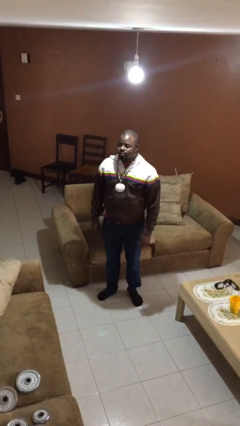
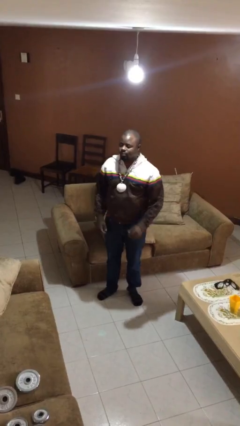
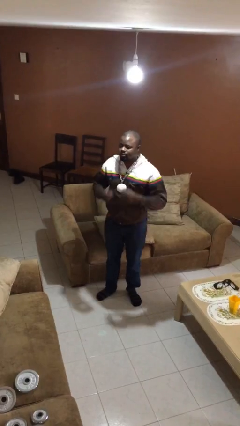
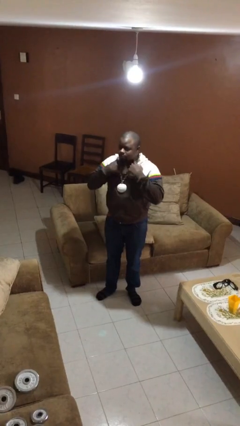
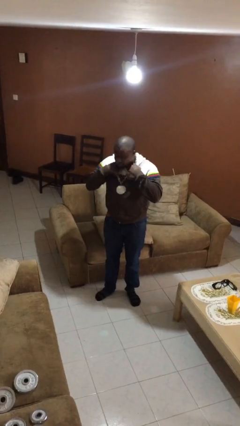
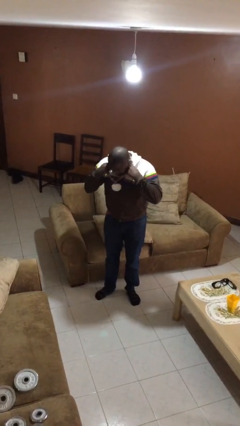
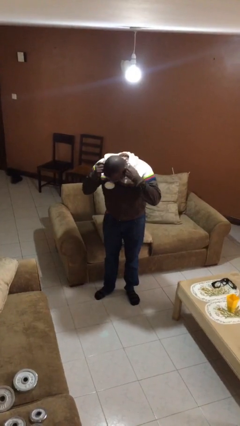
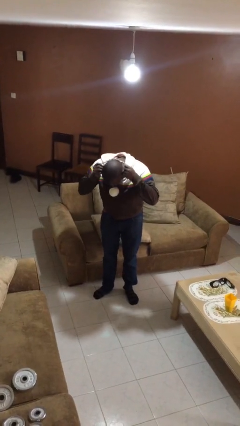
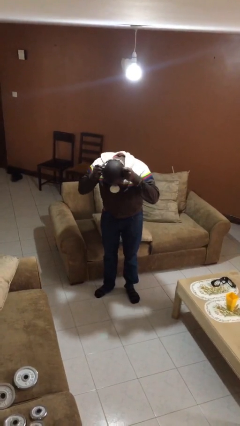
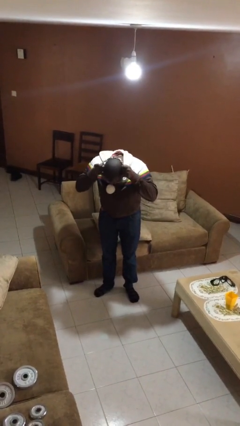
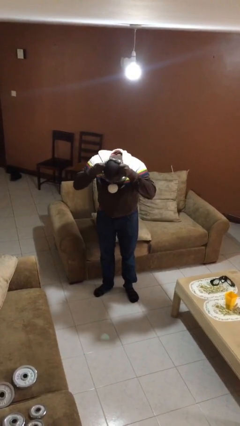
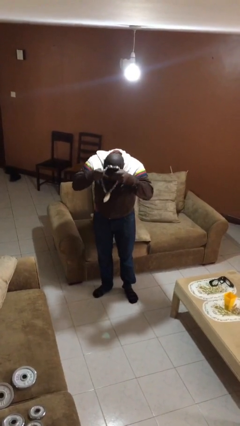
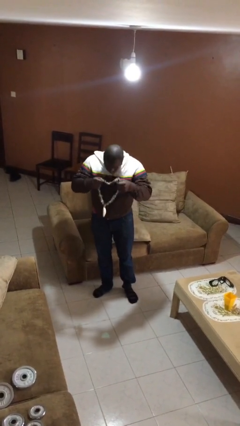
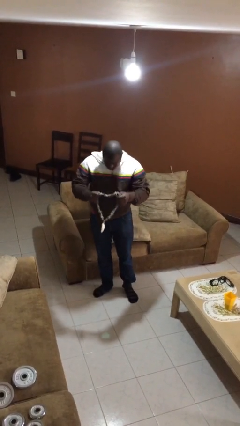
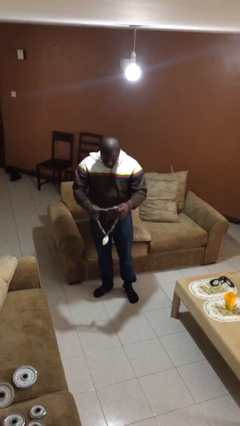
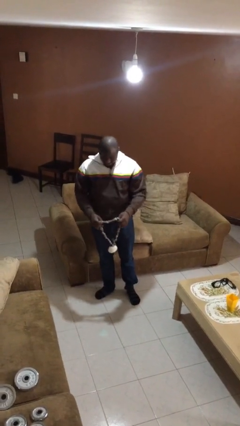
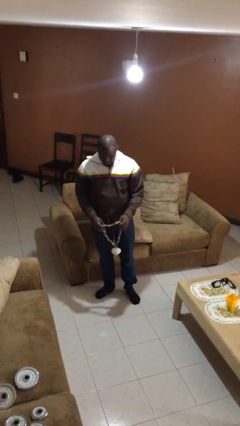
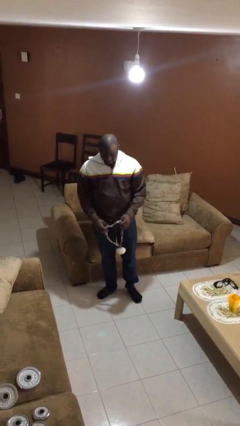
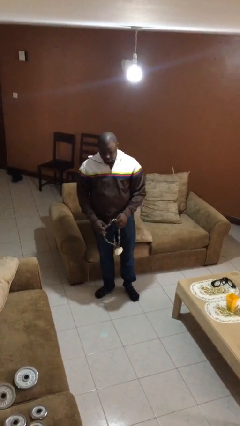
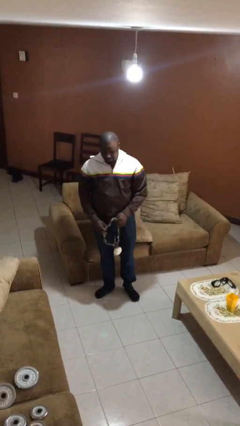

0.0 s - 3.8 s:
person takes off necklace

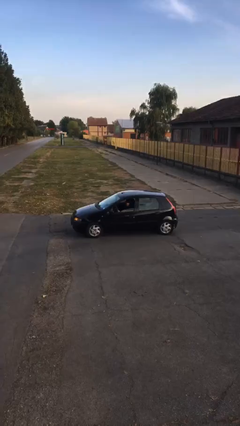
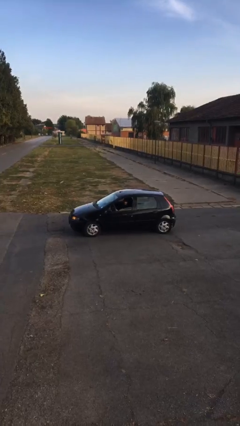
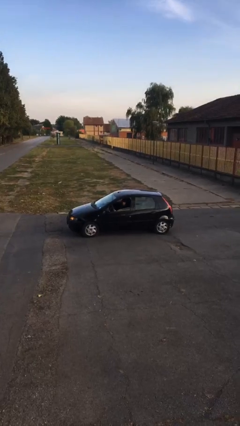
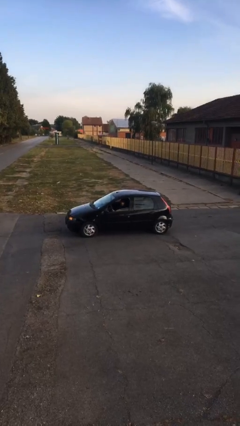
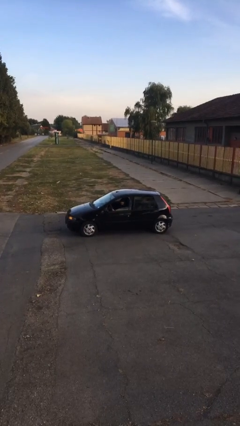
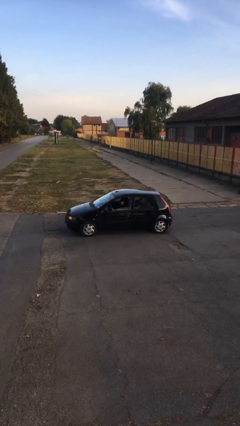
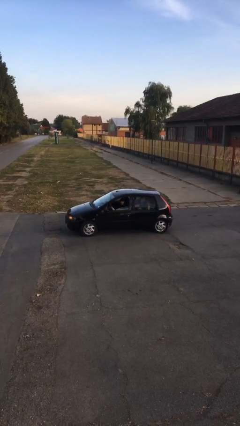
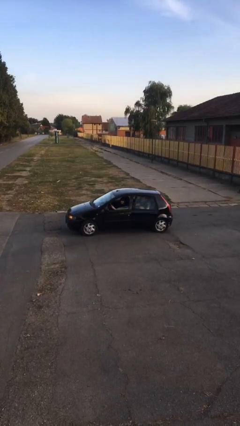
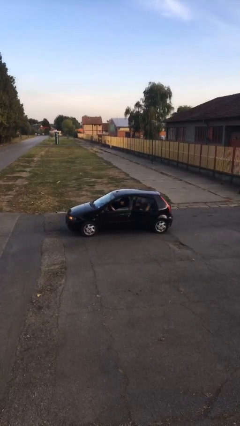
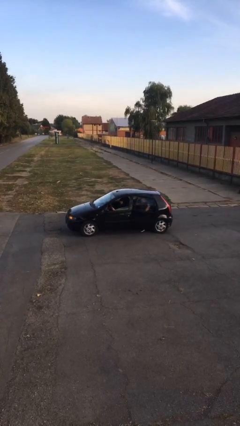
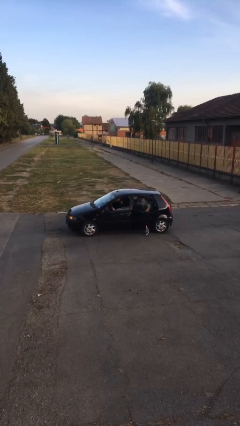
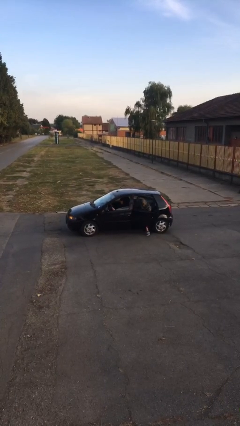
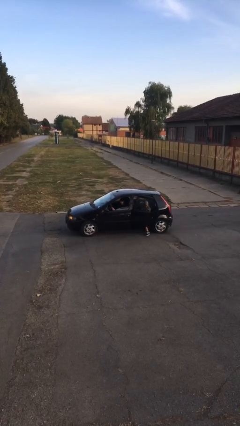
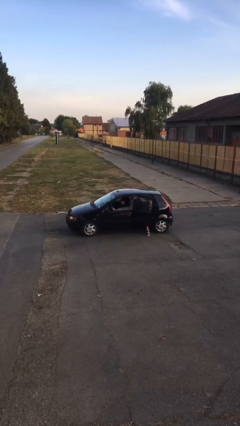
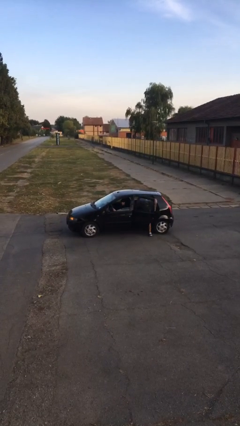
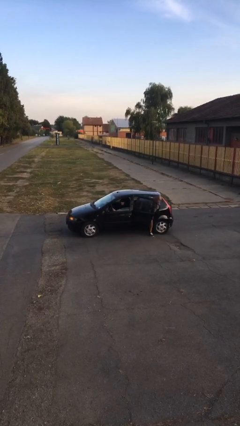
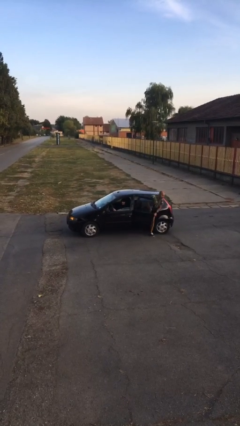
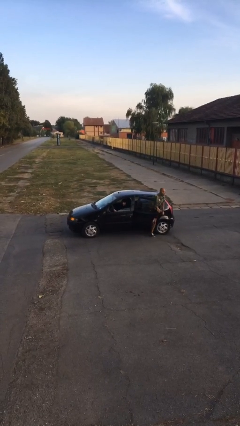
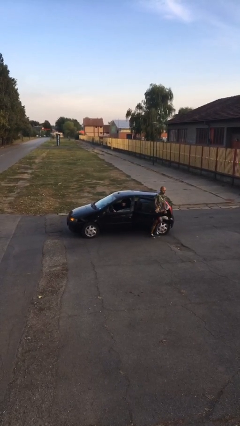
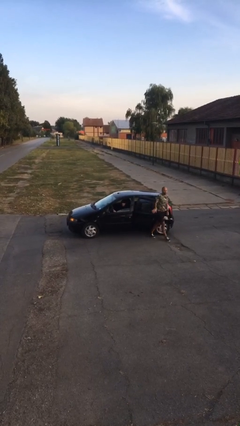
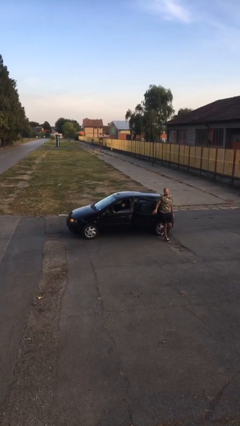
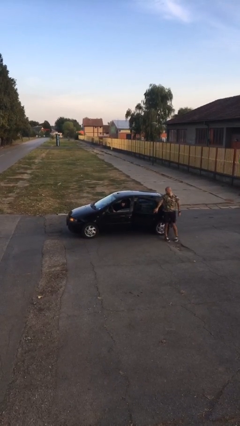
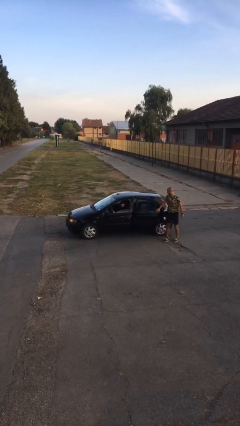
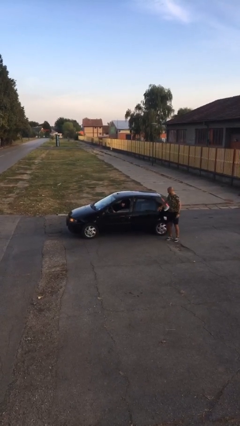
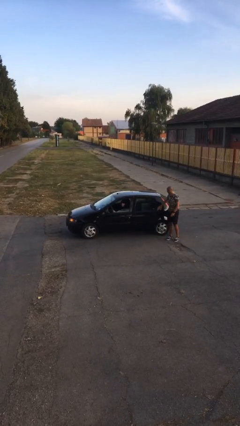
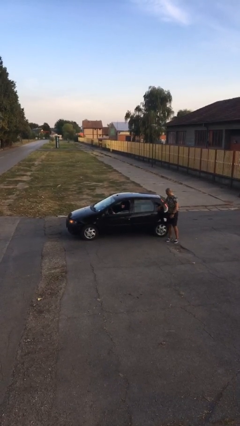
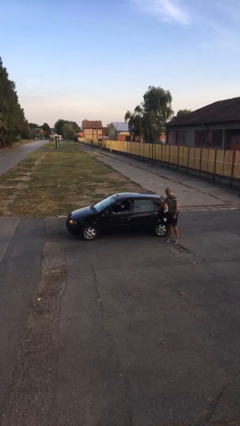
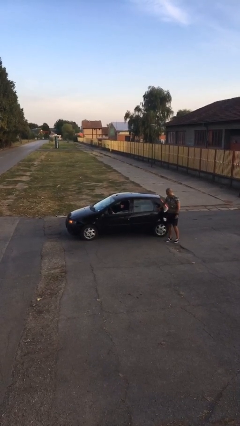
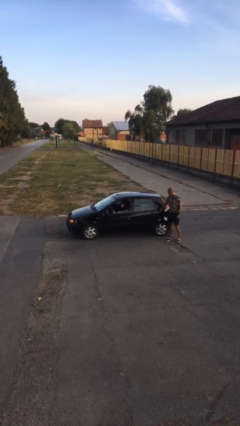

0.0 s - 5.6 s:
car drops off person

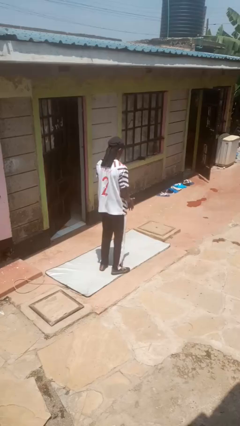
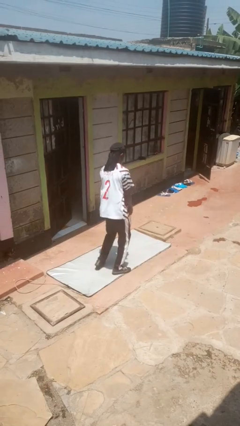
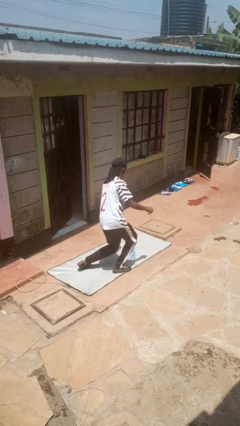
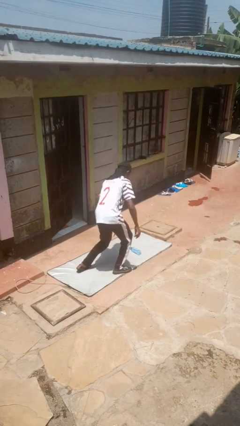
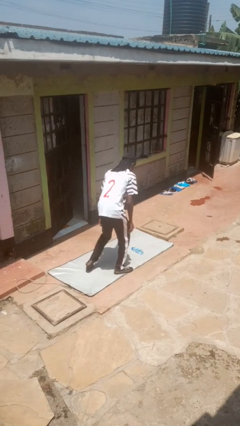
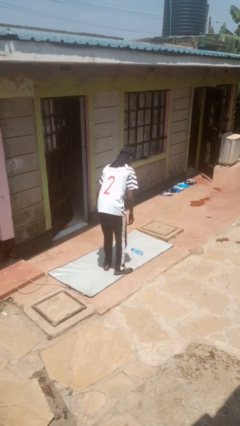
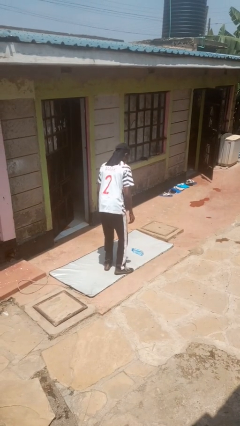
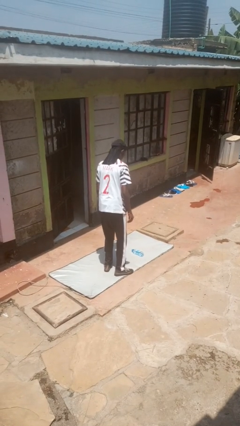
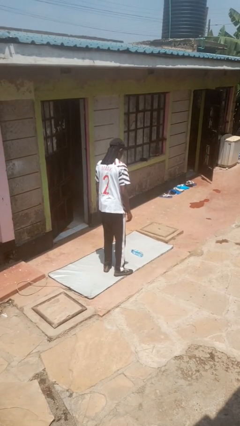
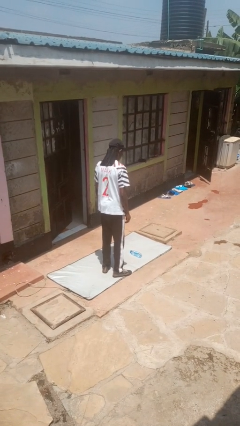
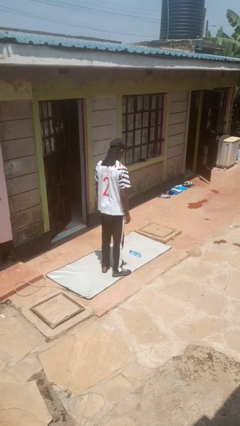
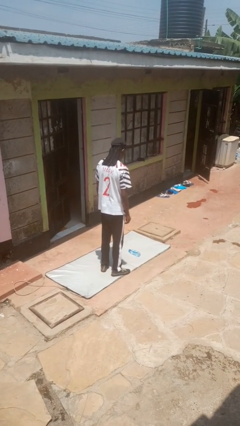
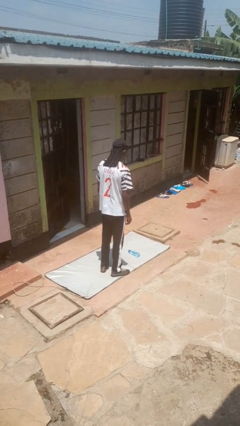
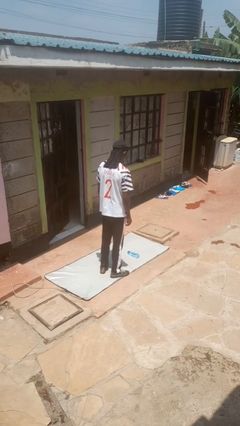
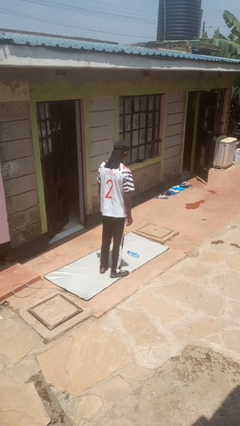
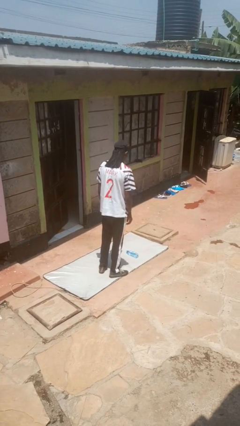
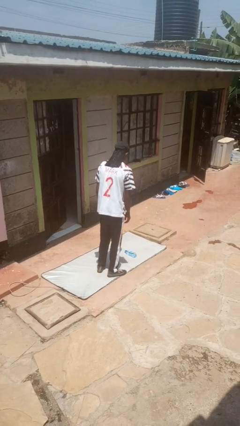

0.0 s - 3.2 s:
person drops object

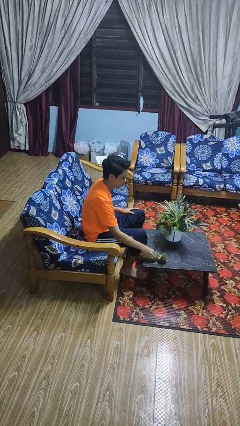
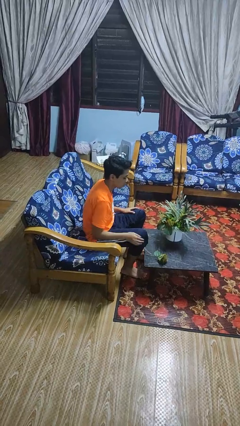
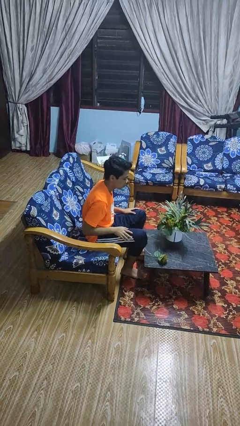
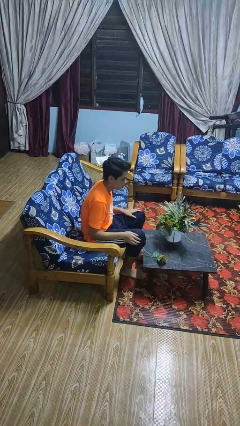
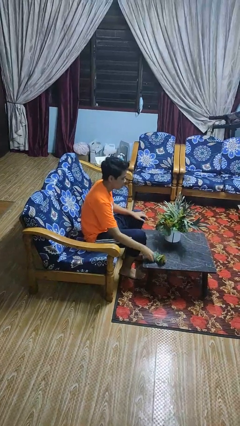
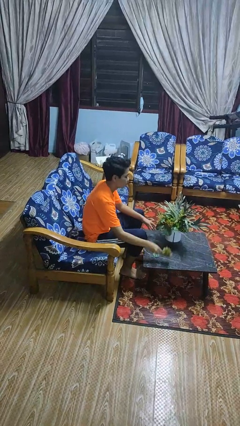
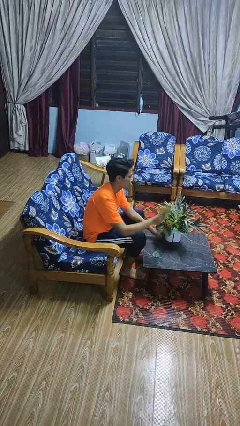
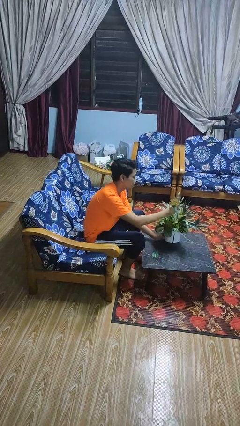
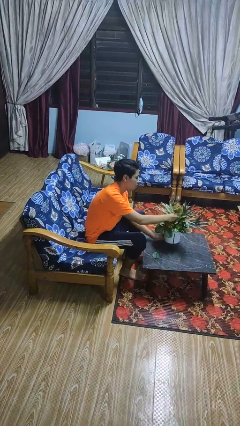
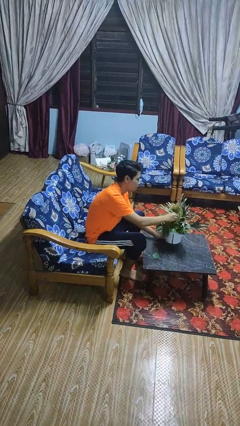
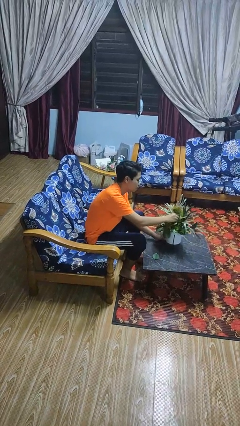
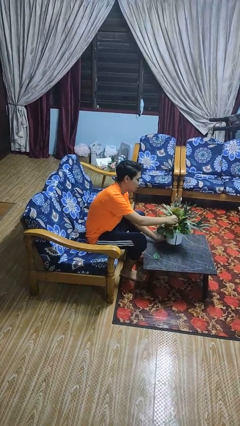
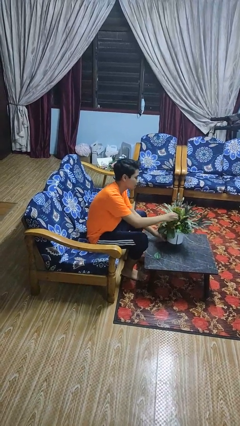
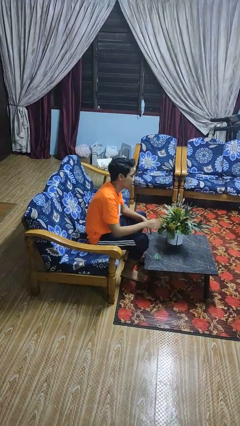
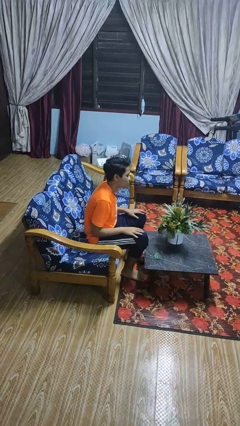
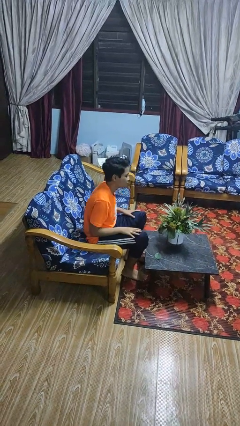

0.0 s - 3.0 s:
person arranges flowers in vase

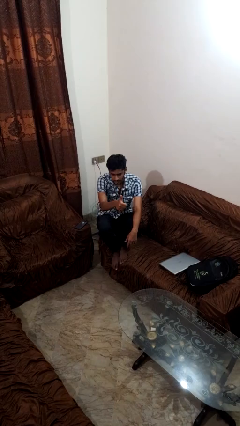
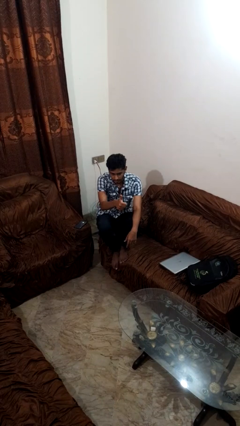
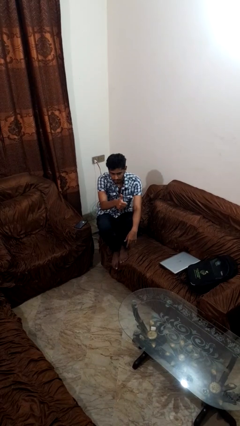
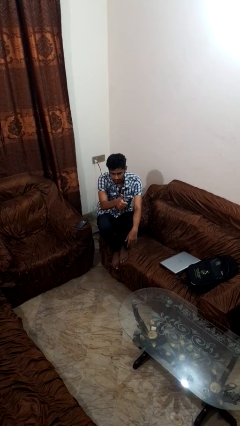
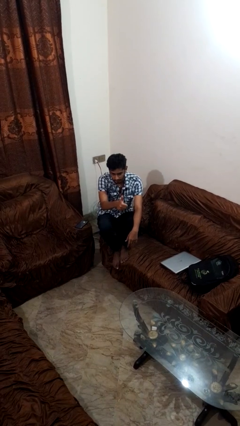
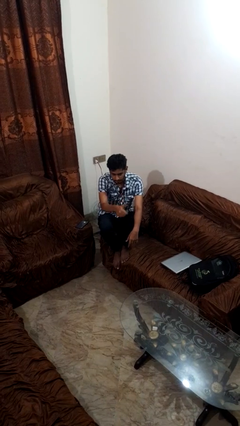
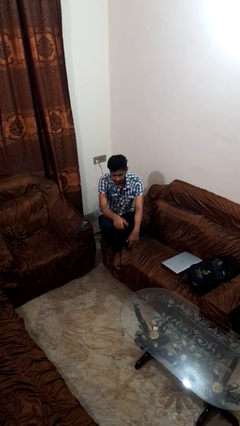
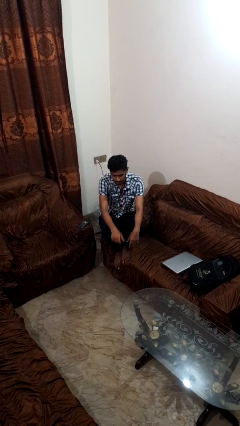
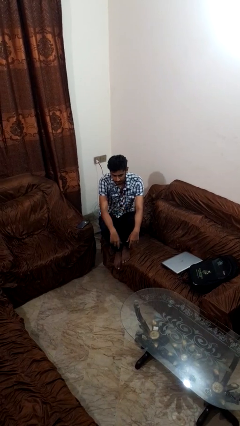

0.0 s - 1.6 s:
person gestures thumbs up

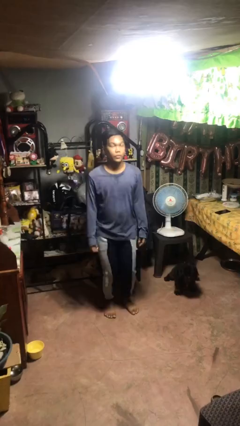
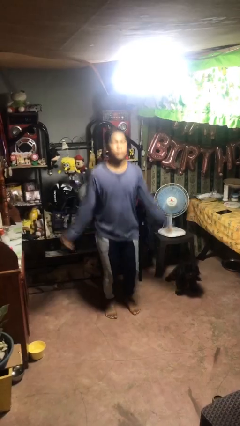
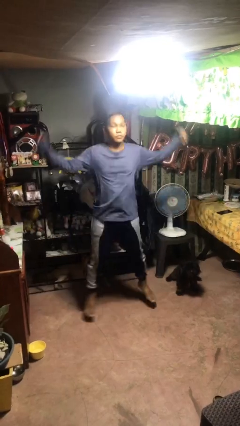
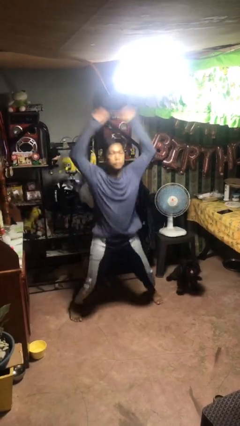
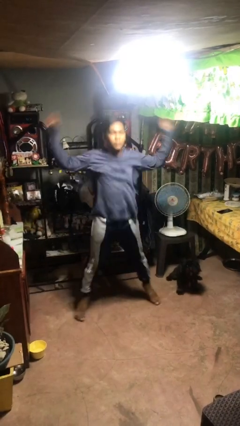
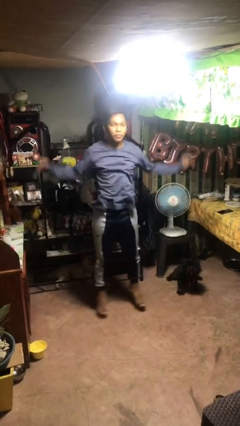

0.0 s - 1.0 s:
person exercises with jumping jacks
